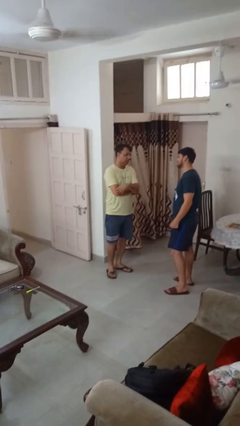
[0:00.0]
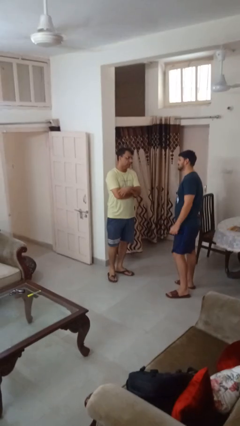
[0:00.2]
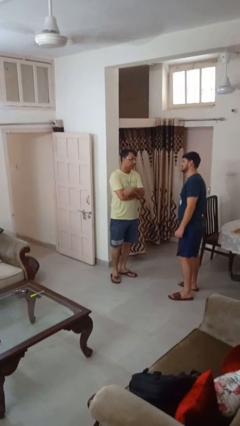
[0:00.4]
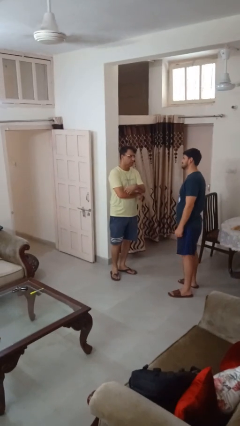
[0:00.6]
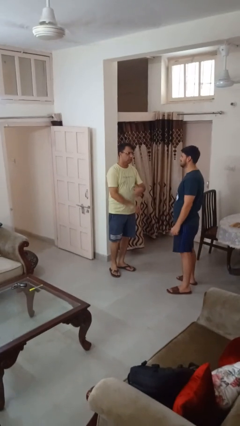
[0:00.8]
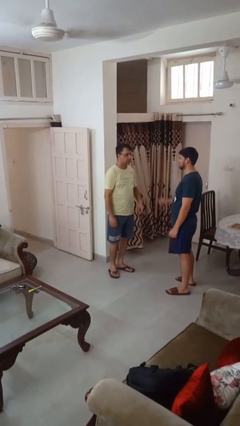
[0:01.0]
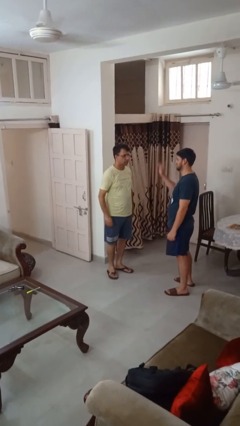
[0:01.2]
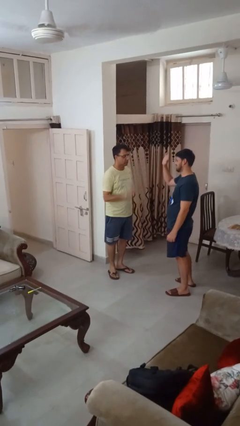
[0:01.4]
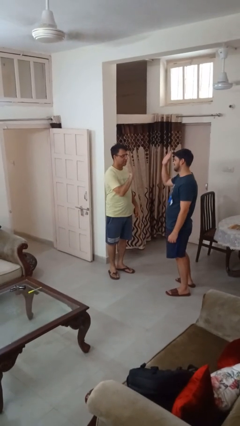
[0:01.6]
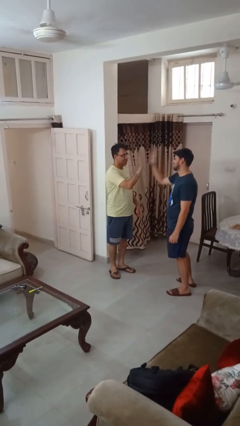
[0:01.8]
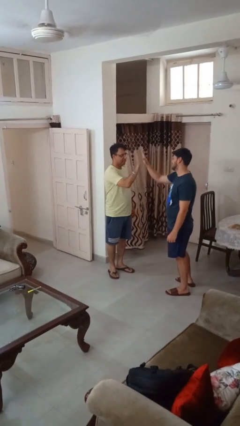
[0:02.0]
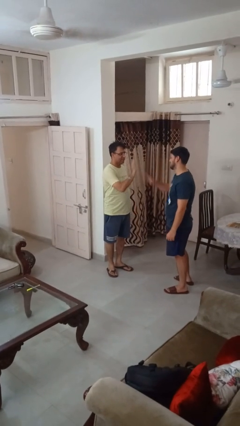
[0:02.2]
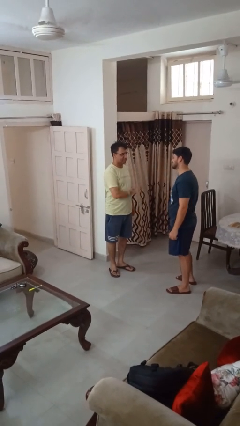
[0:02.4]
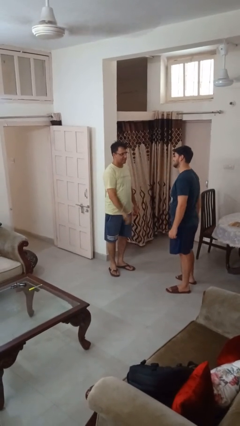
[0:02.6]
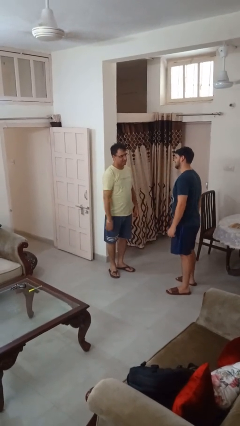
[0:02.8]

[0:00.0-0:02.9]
person highfives hand

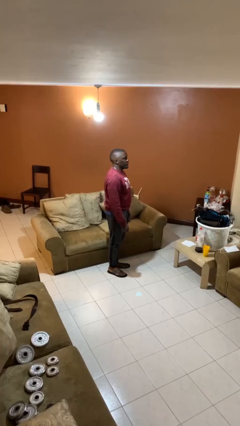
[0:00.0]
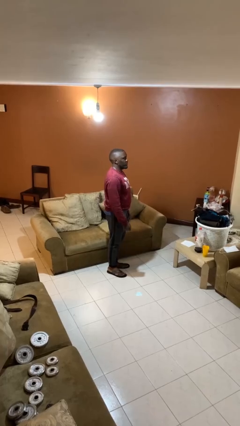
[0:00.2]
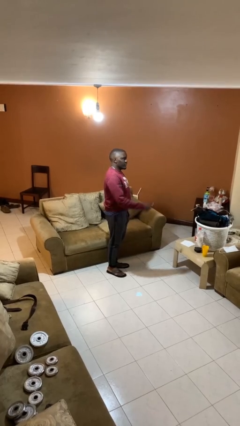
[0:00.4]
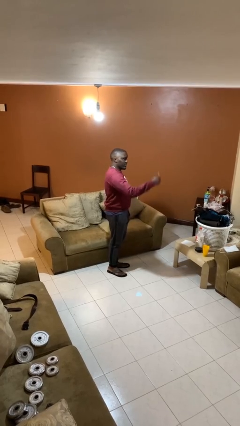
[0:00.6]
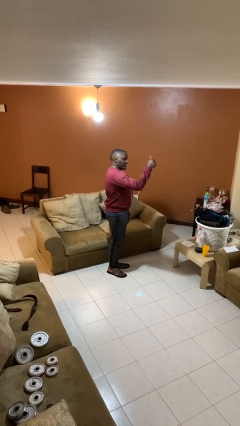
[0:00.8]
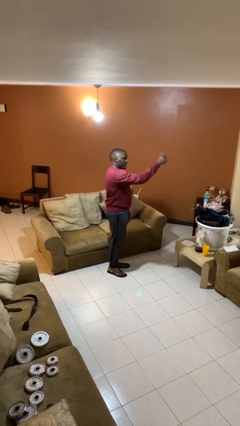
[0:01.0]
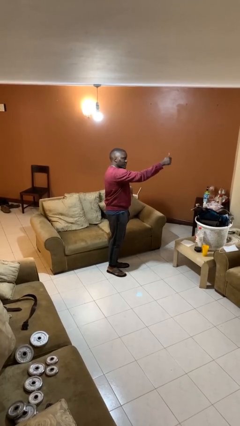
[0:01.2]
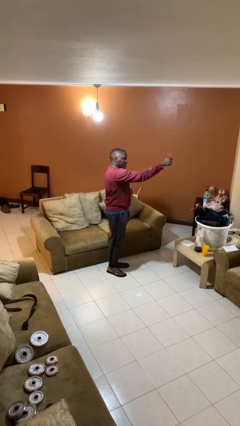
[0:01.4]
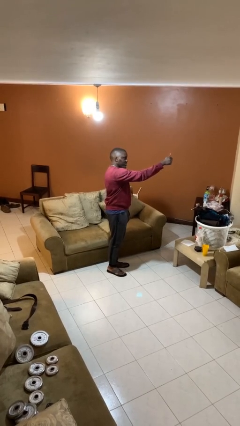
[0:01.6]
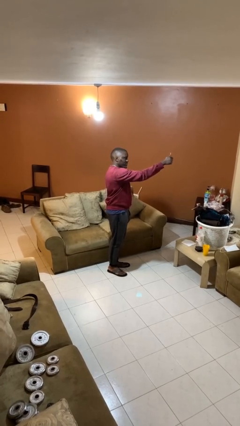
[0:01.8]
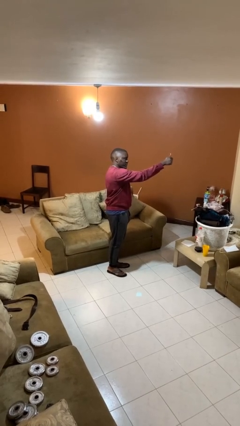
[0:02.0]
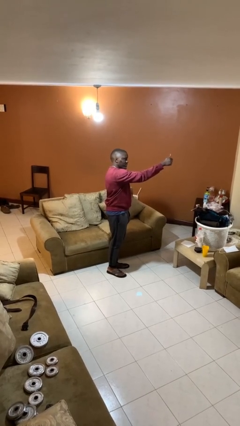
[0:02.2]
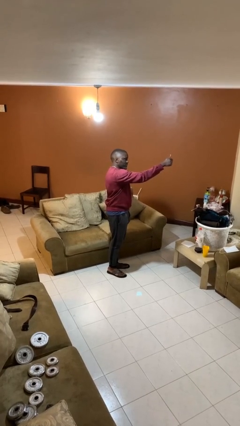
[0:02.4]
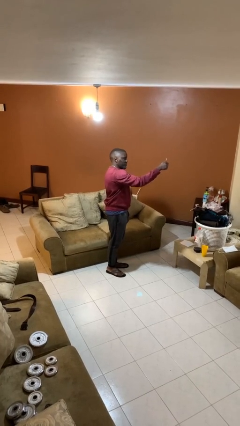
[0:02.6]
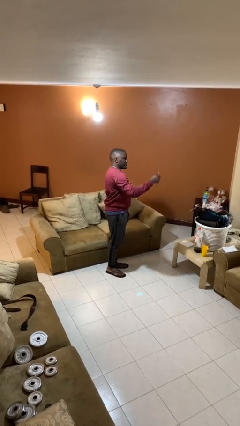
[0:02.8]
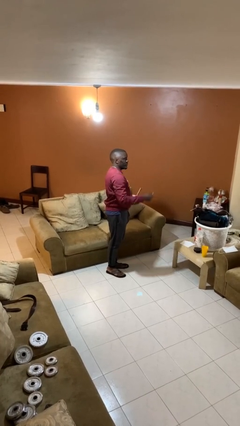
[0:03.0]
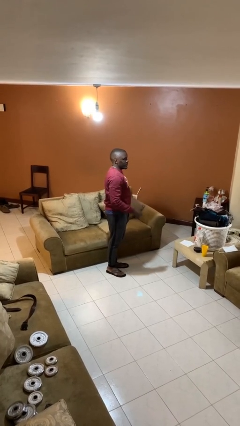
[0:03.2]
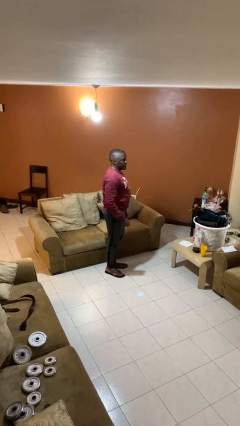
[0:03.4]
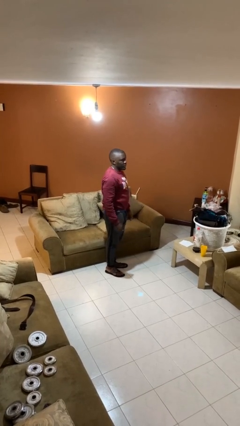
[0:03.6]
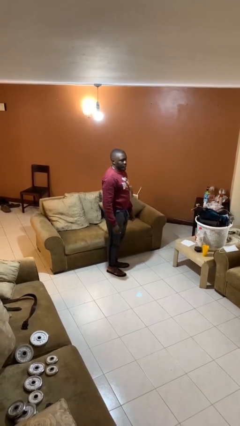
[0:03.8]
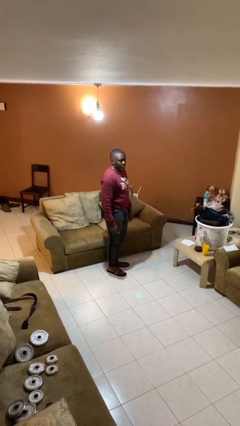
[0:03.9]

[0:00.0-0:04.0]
person gestures thumbs up

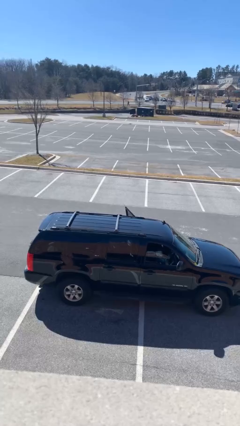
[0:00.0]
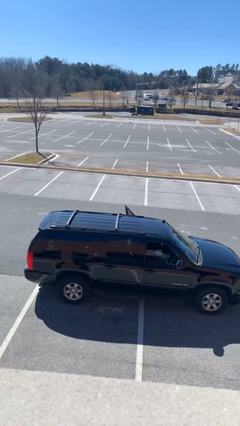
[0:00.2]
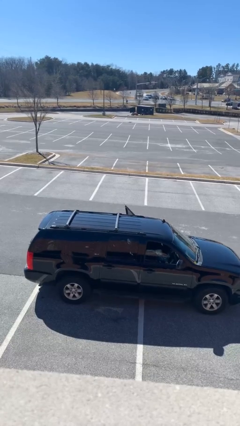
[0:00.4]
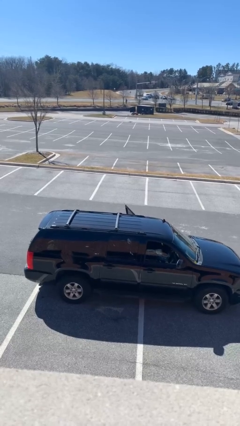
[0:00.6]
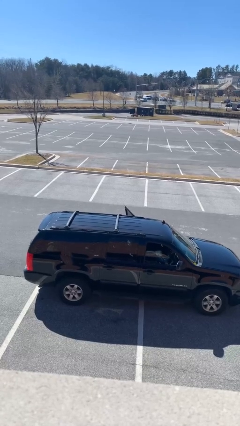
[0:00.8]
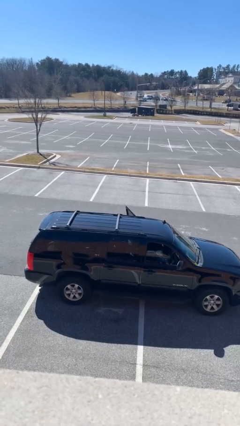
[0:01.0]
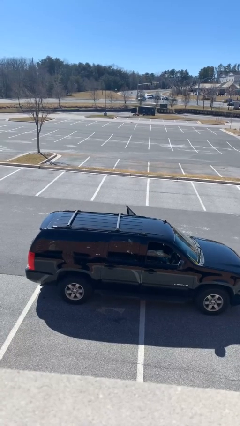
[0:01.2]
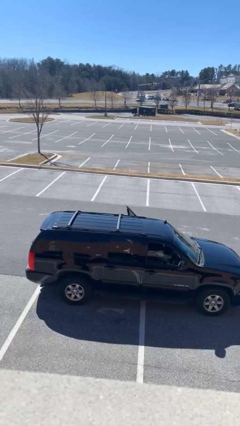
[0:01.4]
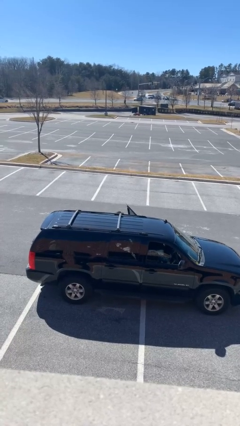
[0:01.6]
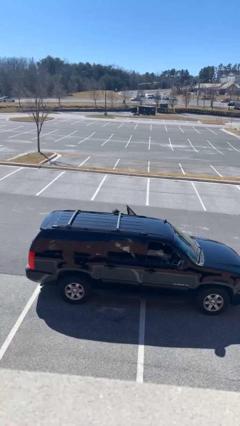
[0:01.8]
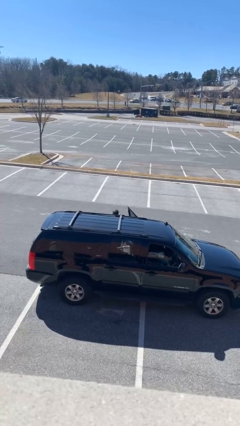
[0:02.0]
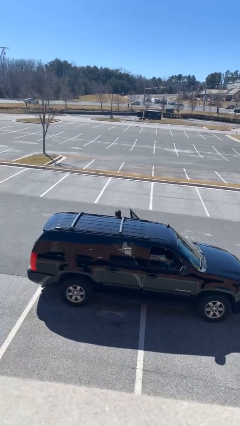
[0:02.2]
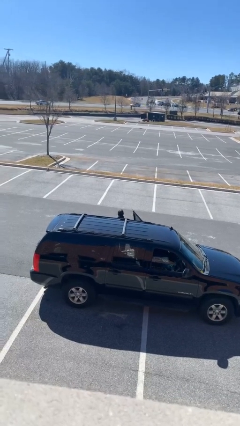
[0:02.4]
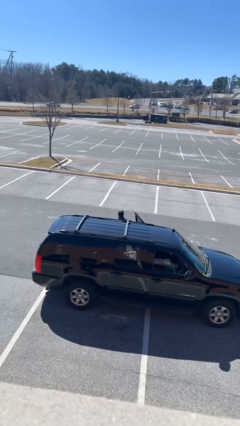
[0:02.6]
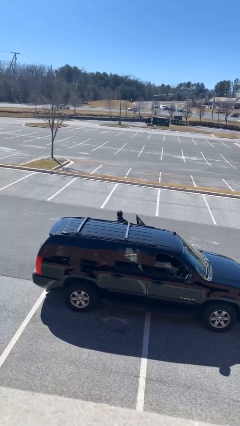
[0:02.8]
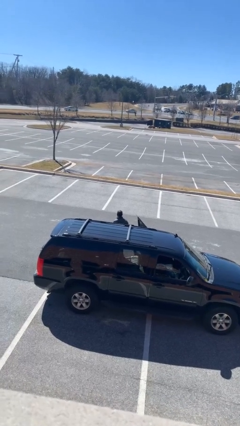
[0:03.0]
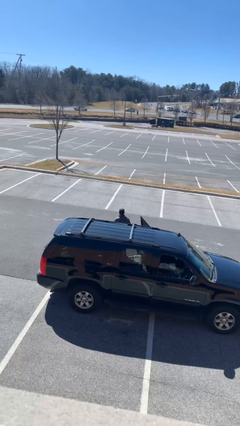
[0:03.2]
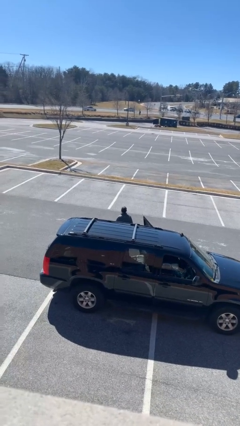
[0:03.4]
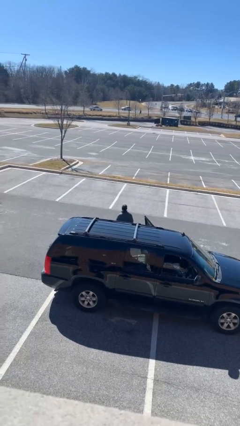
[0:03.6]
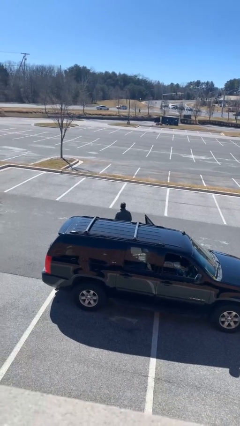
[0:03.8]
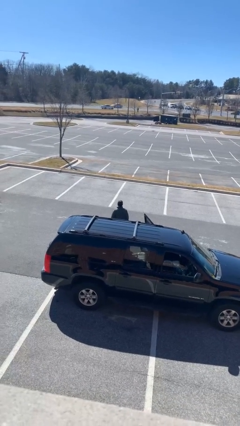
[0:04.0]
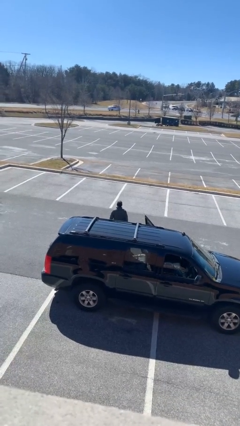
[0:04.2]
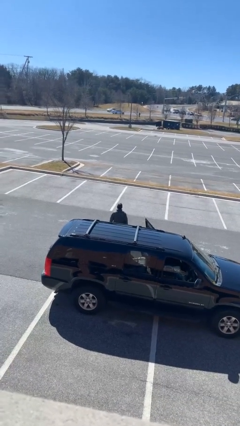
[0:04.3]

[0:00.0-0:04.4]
person exits car

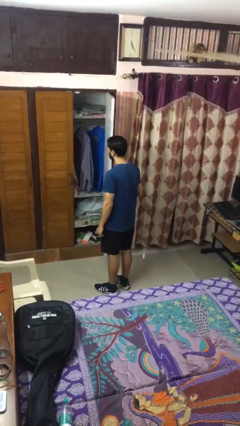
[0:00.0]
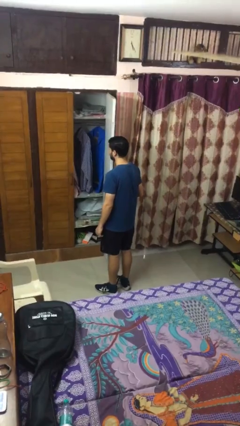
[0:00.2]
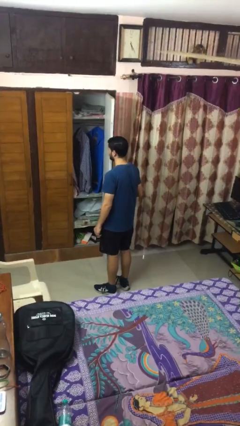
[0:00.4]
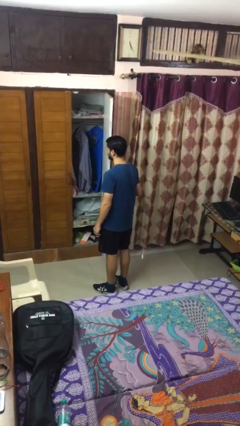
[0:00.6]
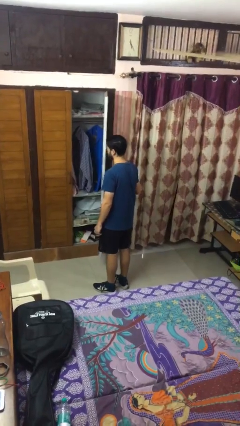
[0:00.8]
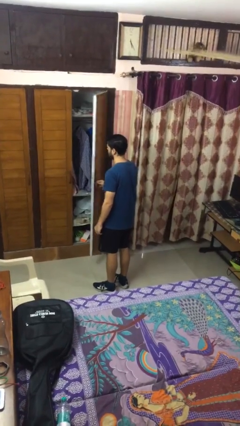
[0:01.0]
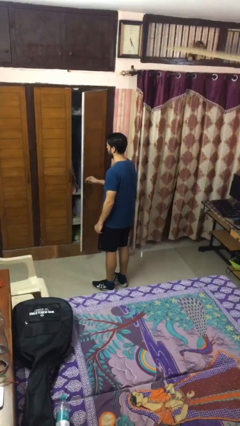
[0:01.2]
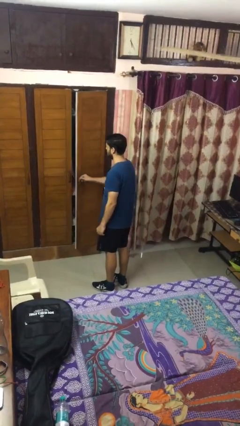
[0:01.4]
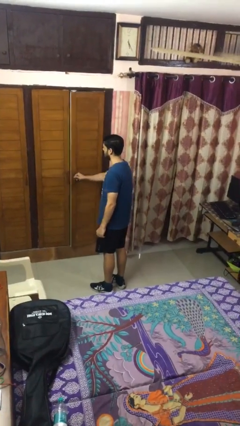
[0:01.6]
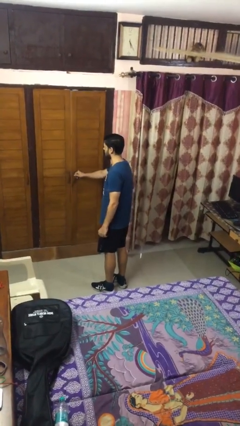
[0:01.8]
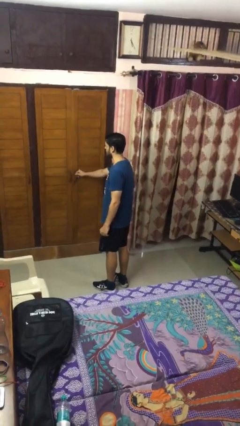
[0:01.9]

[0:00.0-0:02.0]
person closes closet door

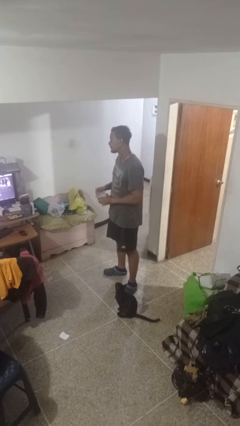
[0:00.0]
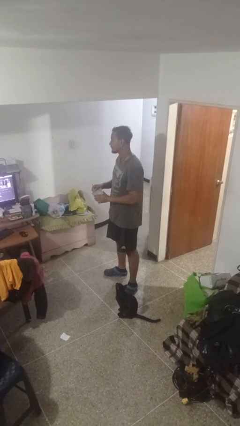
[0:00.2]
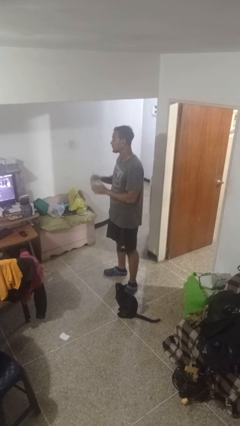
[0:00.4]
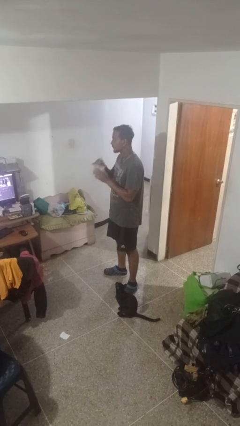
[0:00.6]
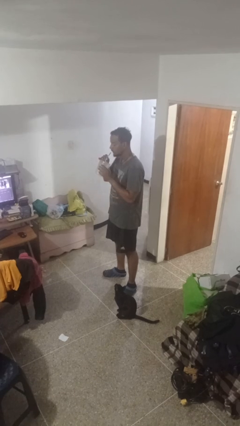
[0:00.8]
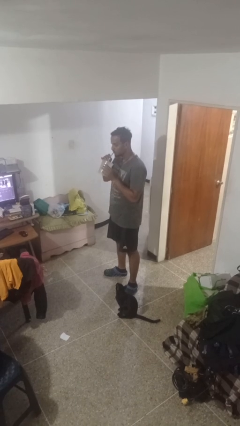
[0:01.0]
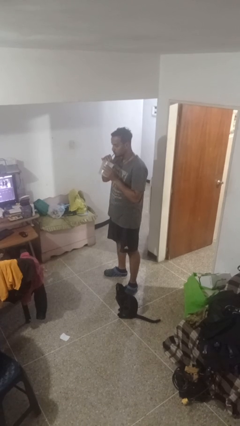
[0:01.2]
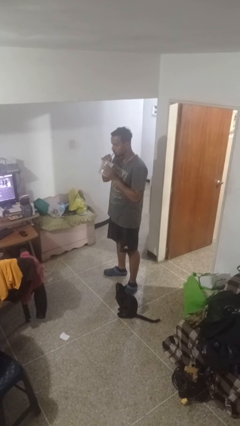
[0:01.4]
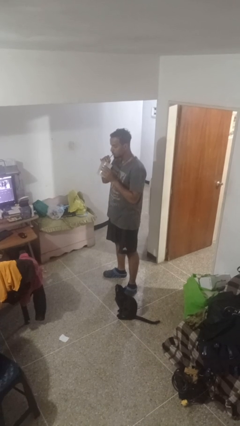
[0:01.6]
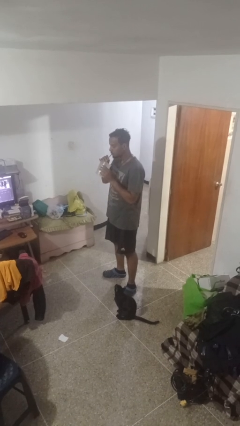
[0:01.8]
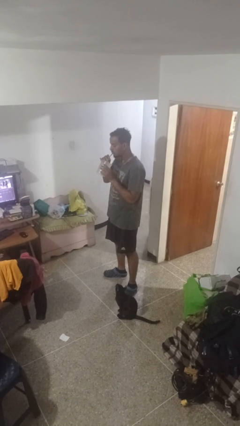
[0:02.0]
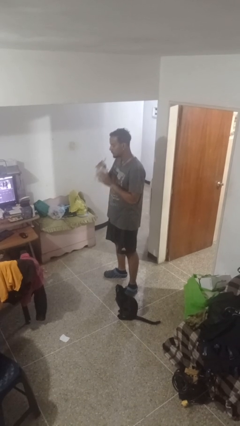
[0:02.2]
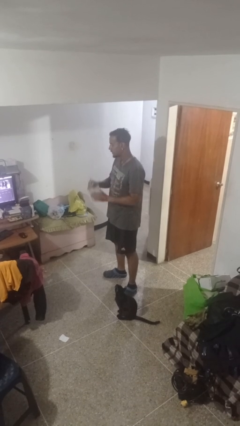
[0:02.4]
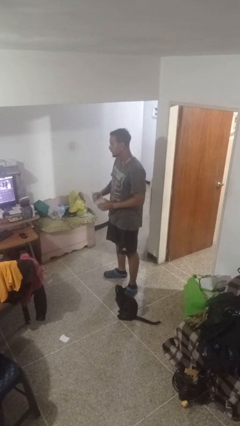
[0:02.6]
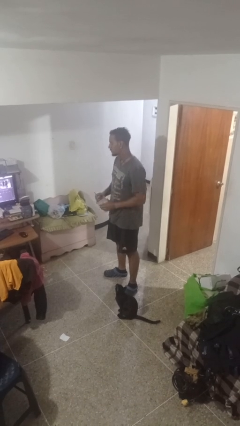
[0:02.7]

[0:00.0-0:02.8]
person drinks from straw

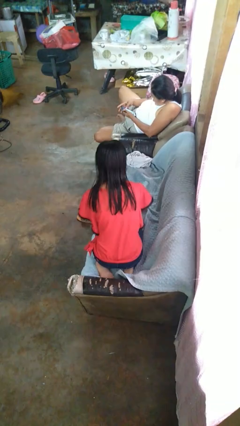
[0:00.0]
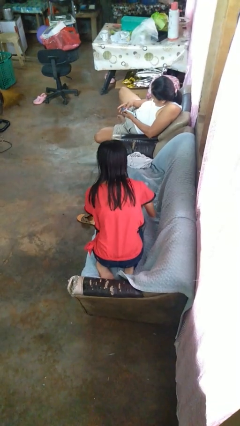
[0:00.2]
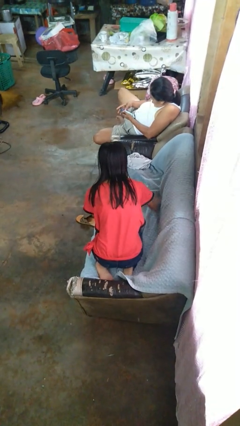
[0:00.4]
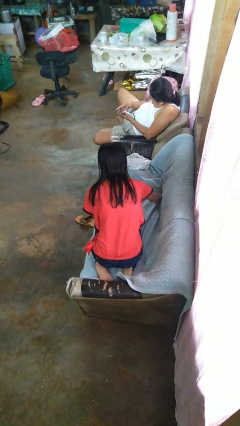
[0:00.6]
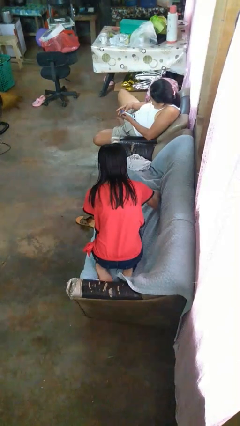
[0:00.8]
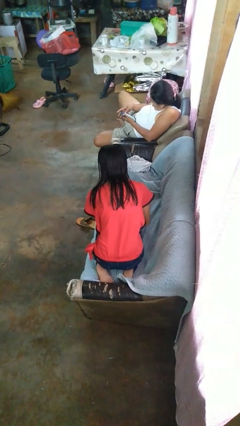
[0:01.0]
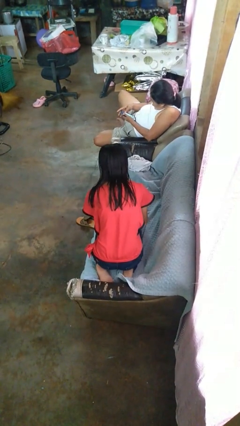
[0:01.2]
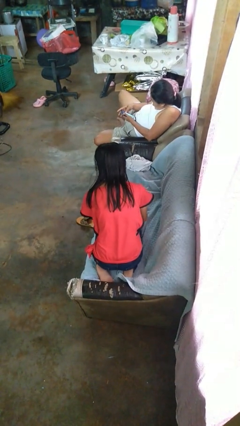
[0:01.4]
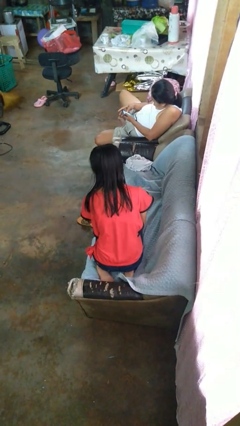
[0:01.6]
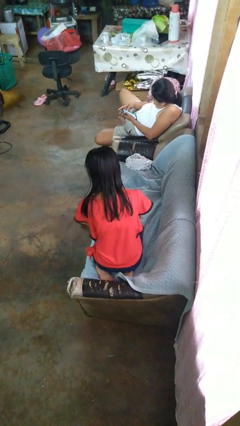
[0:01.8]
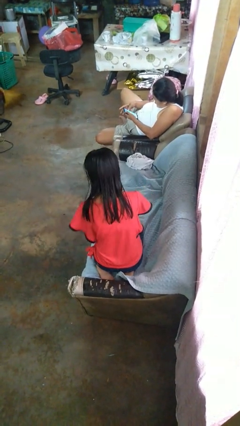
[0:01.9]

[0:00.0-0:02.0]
person searches in couch
